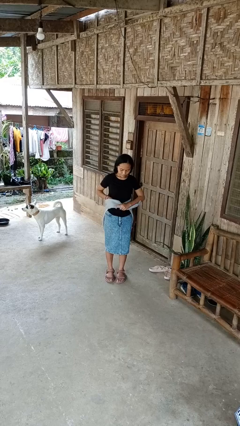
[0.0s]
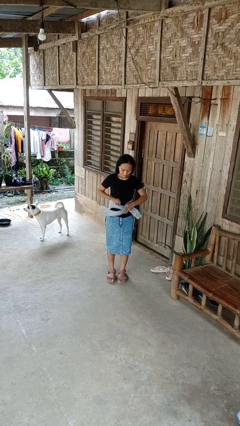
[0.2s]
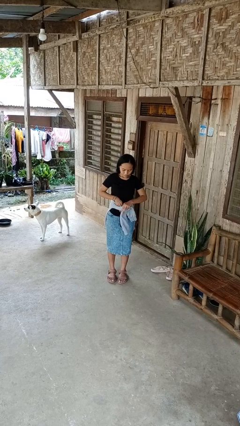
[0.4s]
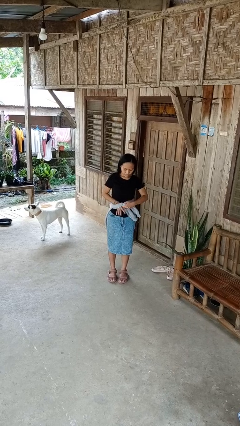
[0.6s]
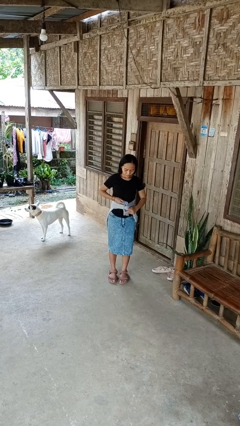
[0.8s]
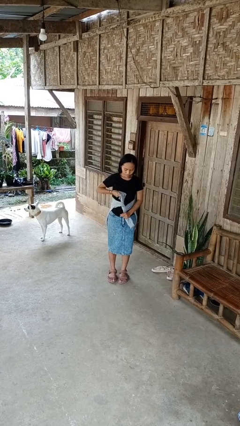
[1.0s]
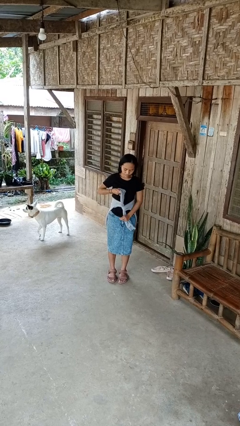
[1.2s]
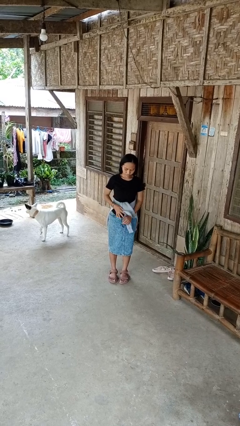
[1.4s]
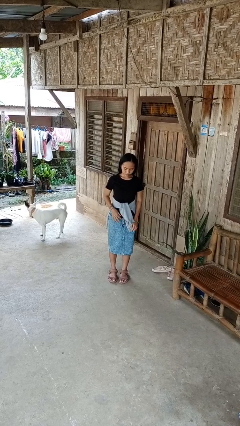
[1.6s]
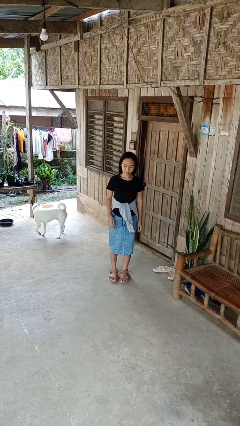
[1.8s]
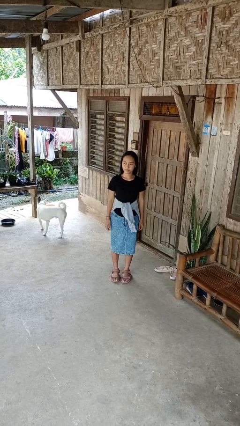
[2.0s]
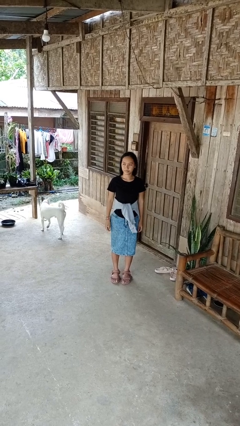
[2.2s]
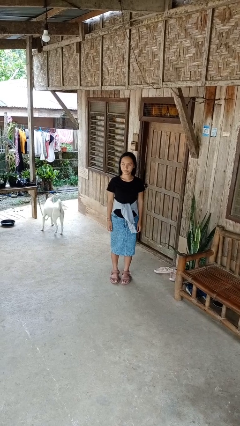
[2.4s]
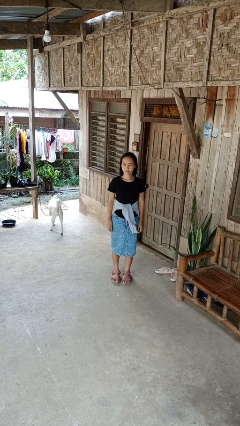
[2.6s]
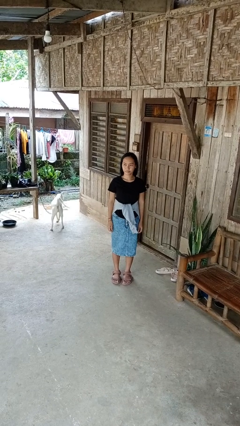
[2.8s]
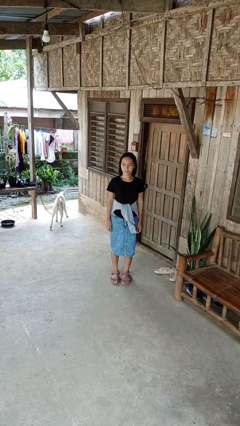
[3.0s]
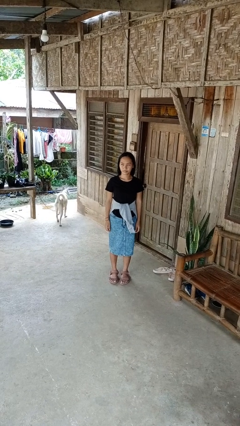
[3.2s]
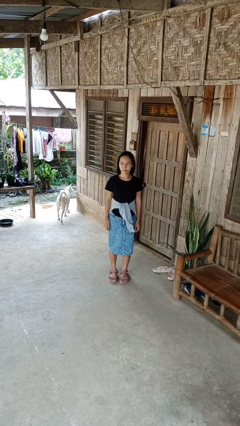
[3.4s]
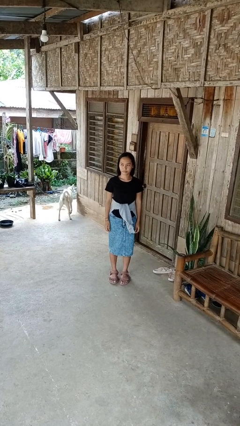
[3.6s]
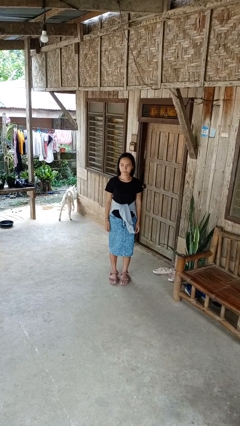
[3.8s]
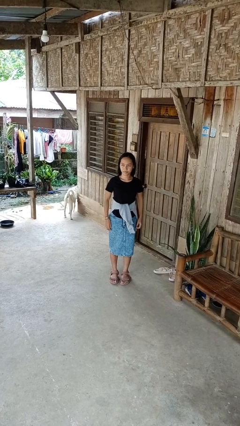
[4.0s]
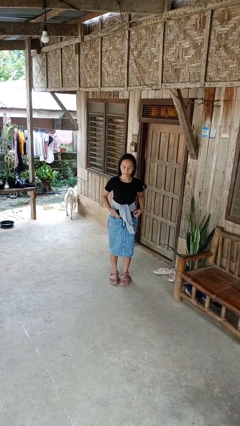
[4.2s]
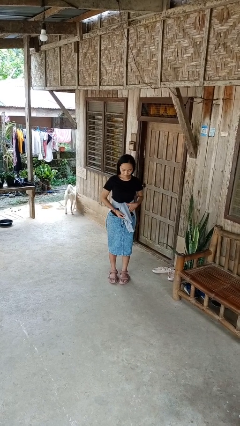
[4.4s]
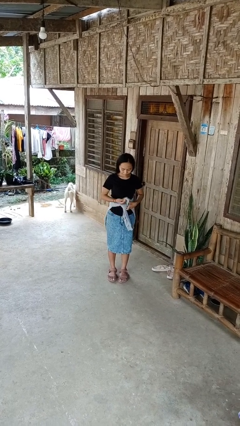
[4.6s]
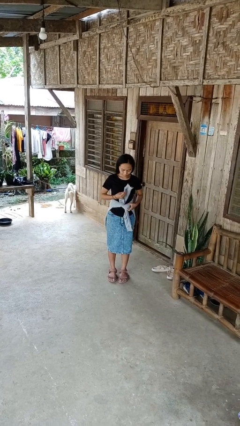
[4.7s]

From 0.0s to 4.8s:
person ties jacket around waist

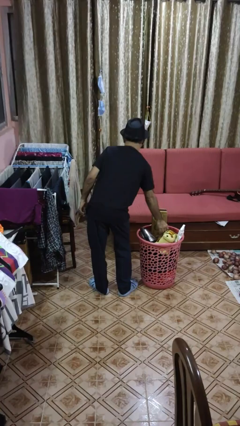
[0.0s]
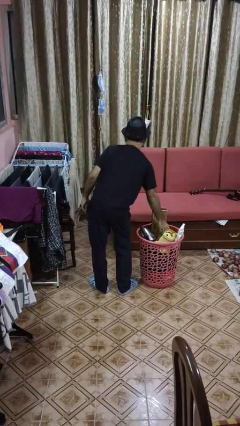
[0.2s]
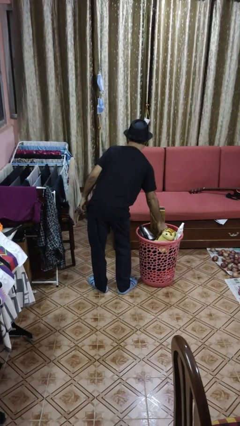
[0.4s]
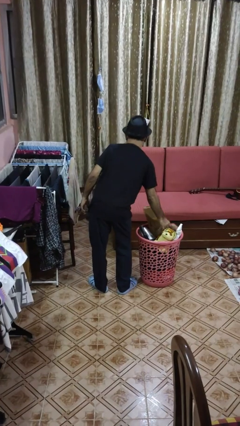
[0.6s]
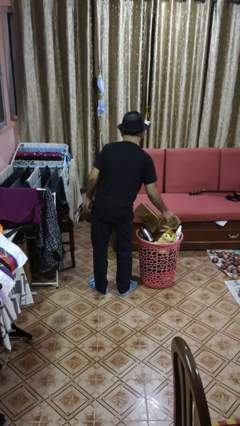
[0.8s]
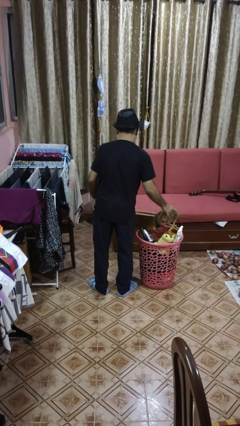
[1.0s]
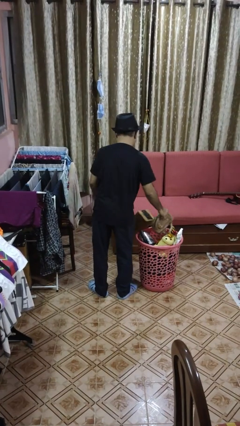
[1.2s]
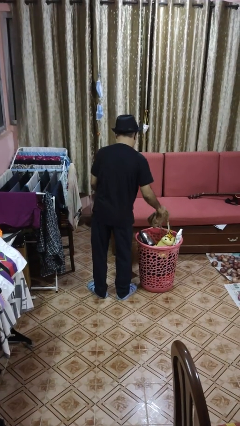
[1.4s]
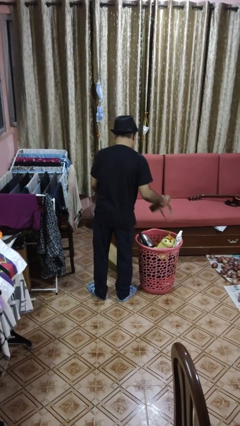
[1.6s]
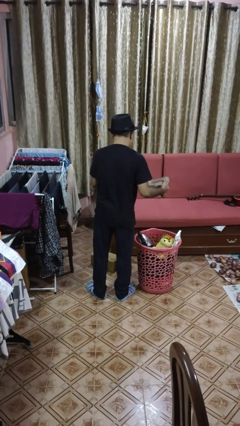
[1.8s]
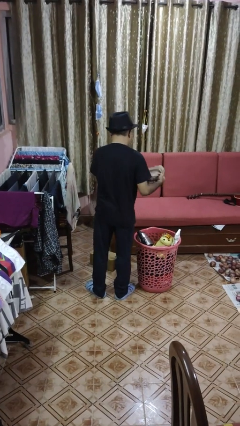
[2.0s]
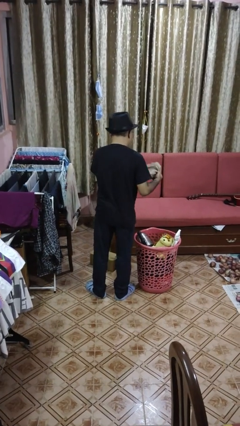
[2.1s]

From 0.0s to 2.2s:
person takes object from basket

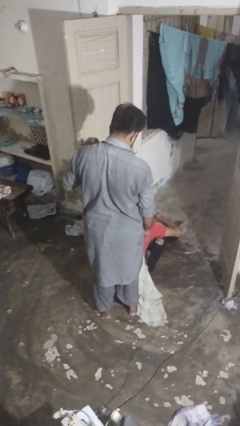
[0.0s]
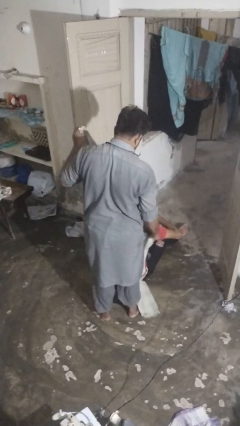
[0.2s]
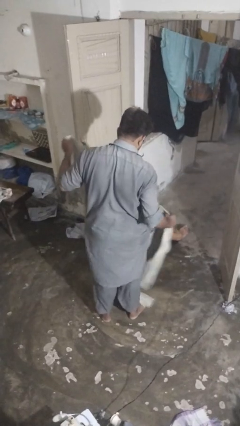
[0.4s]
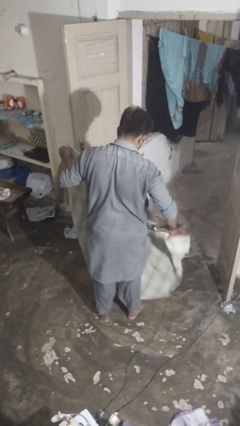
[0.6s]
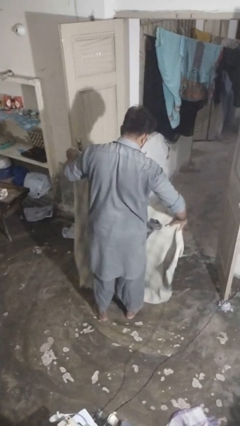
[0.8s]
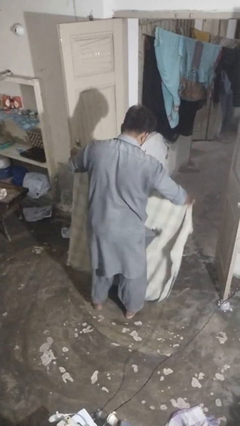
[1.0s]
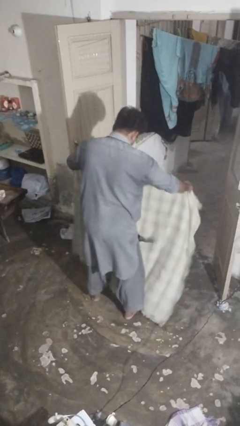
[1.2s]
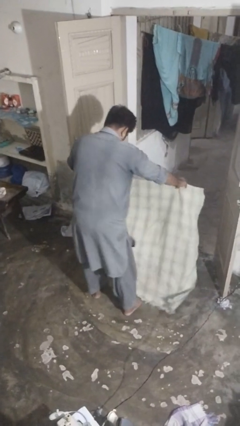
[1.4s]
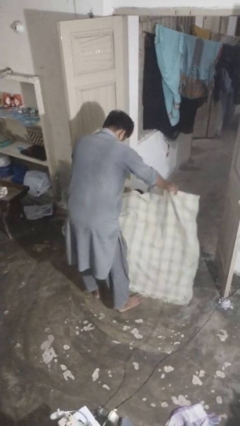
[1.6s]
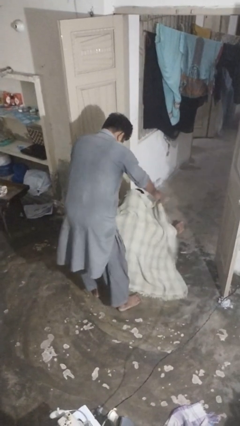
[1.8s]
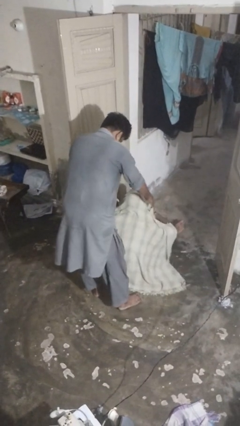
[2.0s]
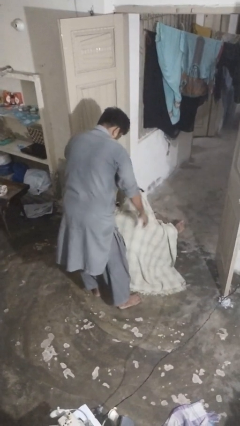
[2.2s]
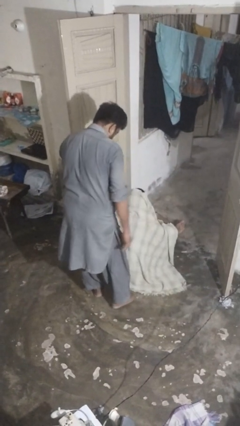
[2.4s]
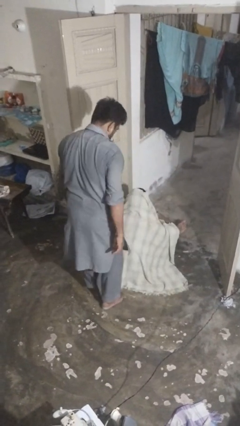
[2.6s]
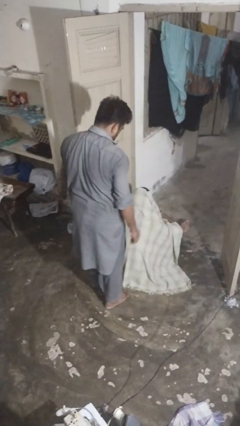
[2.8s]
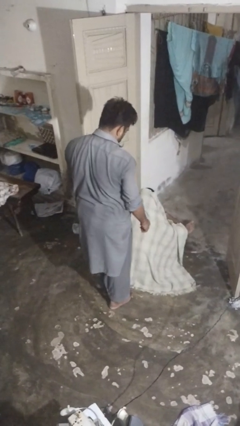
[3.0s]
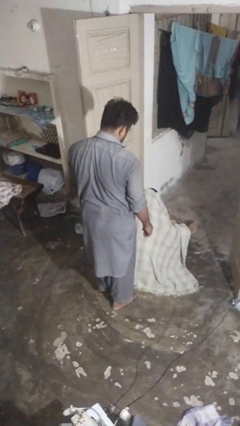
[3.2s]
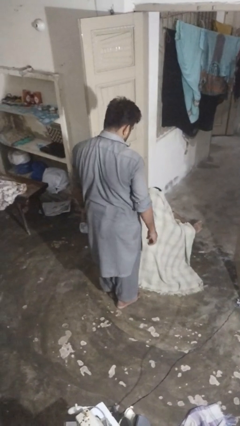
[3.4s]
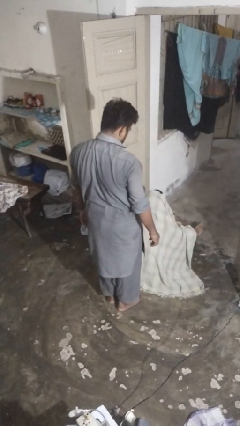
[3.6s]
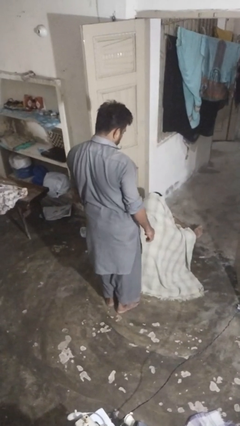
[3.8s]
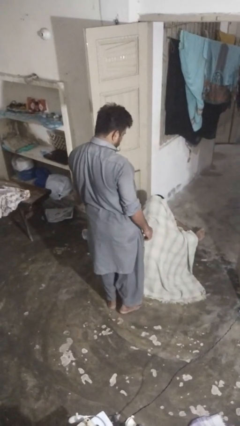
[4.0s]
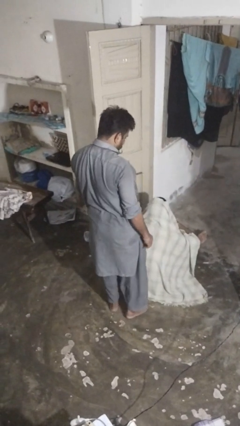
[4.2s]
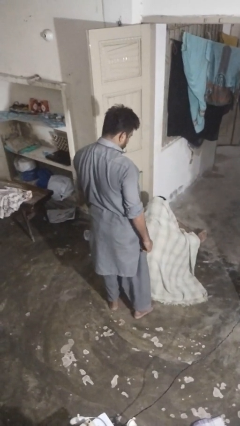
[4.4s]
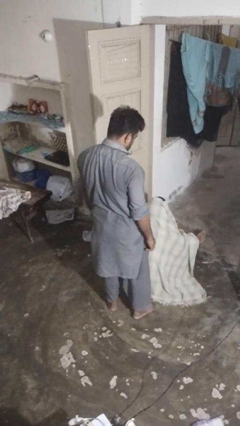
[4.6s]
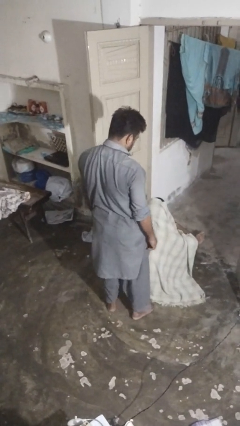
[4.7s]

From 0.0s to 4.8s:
person covers friend with blanket

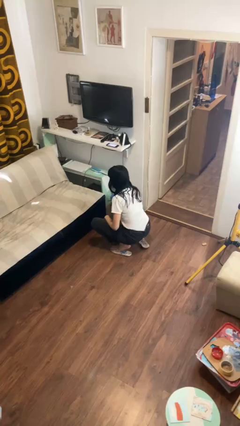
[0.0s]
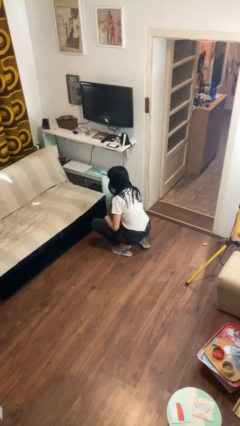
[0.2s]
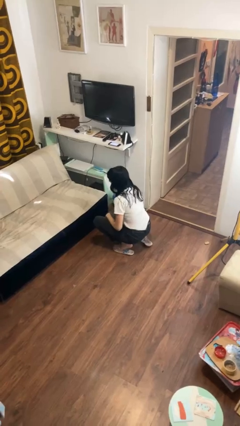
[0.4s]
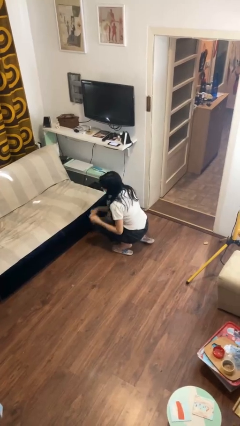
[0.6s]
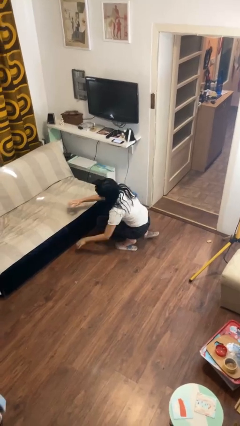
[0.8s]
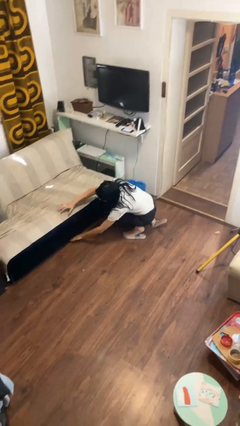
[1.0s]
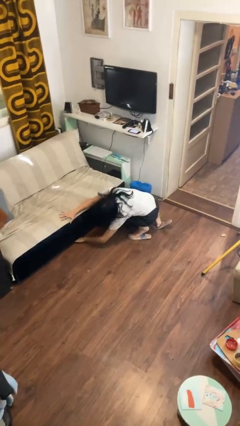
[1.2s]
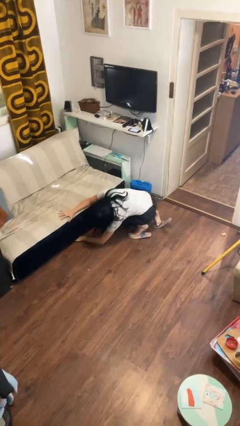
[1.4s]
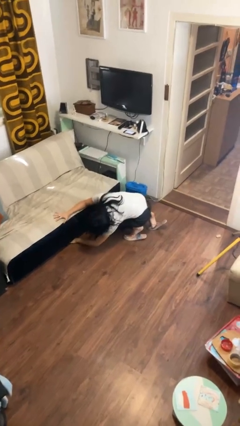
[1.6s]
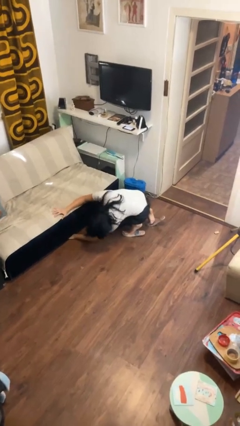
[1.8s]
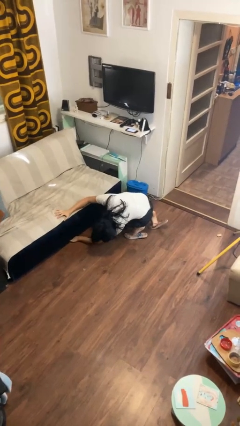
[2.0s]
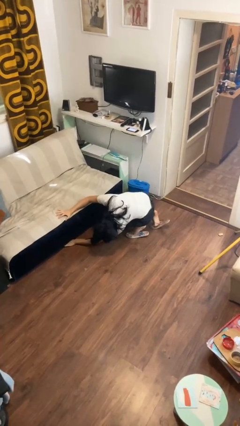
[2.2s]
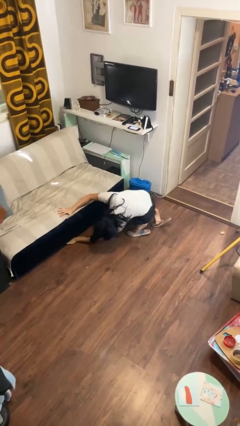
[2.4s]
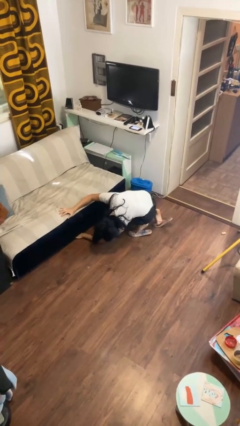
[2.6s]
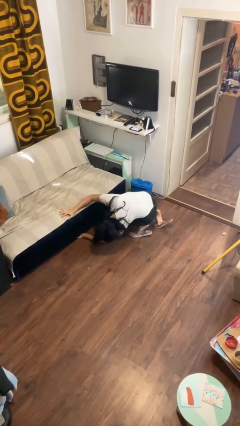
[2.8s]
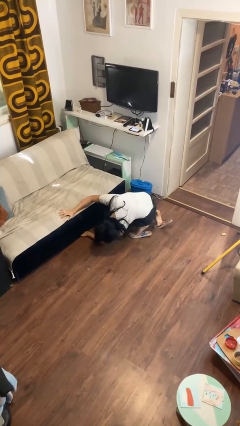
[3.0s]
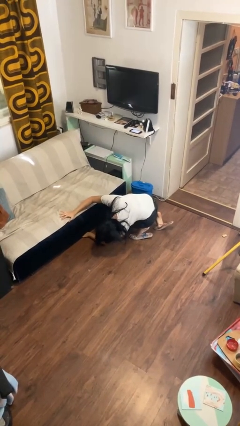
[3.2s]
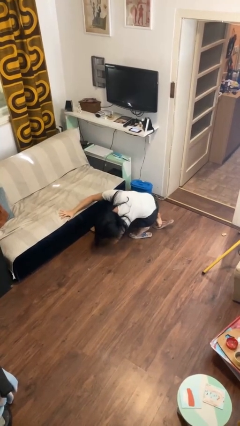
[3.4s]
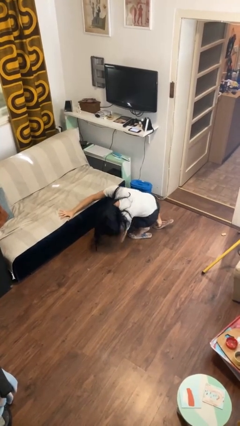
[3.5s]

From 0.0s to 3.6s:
person searches under couch

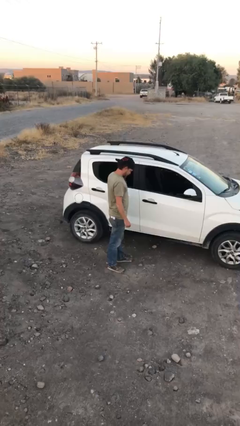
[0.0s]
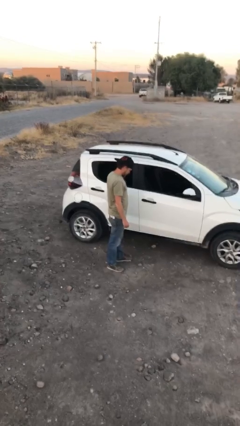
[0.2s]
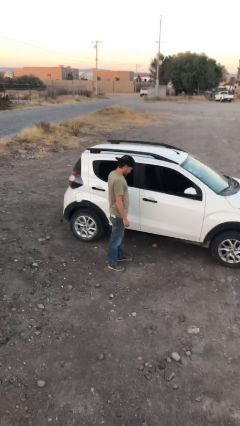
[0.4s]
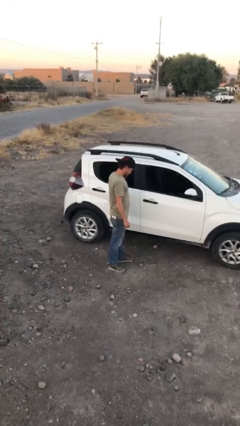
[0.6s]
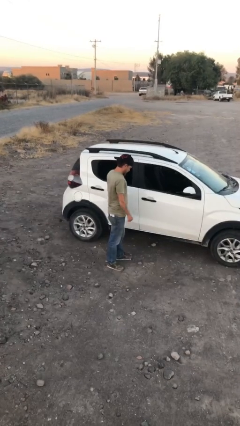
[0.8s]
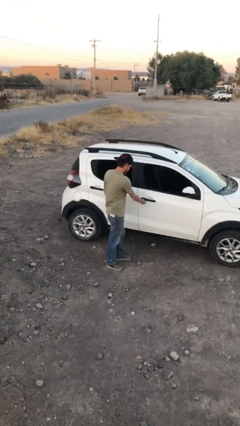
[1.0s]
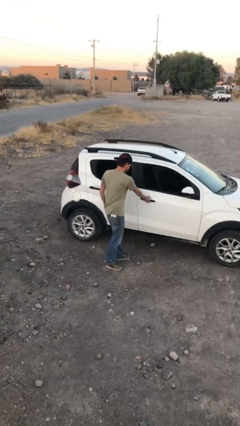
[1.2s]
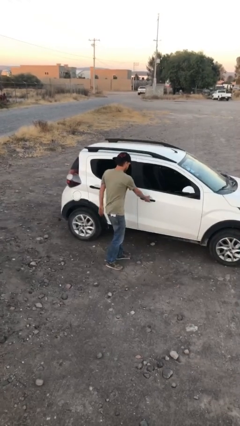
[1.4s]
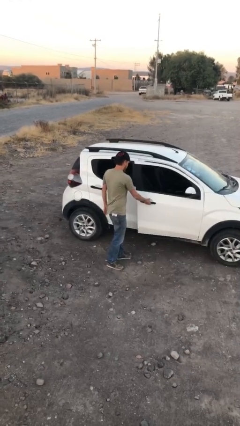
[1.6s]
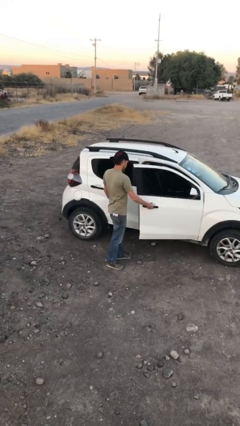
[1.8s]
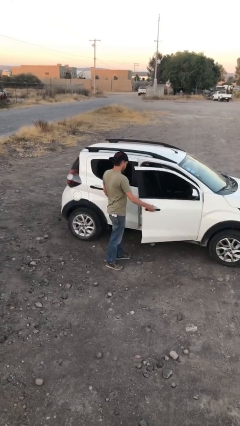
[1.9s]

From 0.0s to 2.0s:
person opens car door

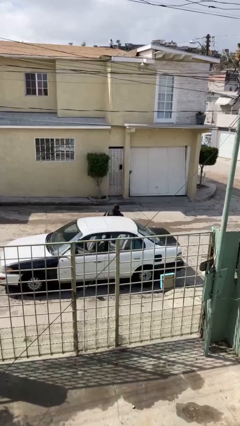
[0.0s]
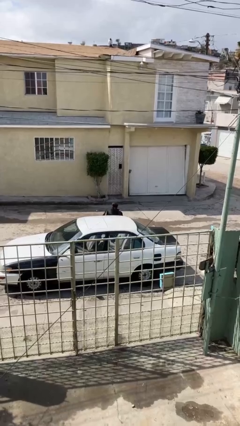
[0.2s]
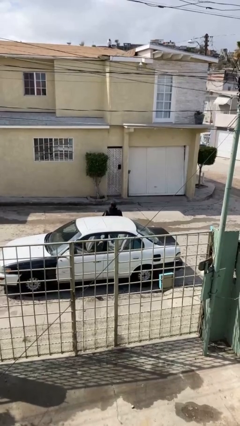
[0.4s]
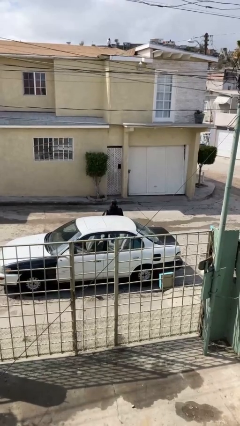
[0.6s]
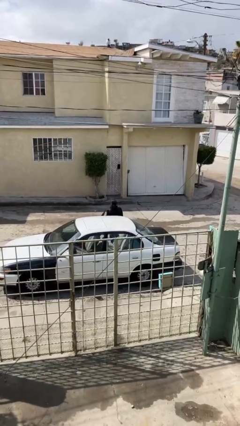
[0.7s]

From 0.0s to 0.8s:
person exits car
